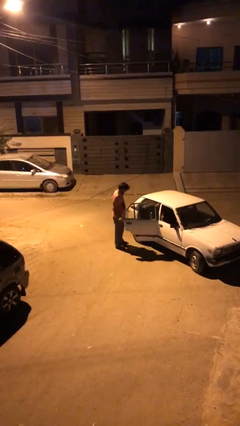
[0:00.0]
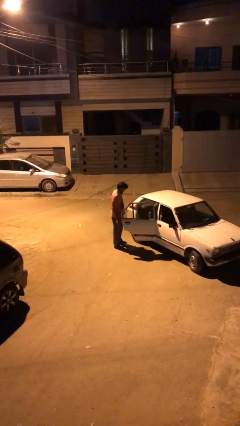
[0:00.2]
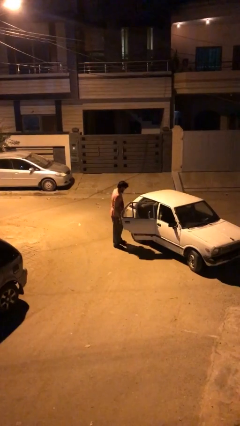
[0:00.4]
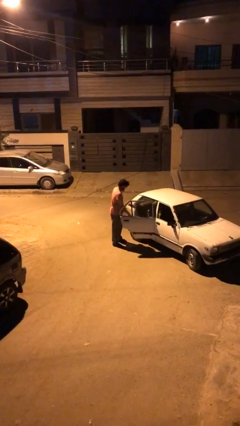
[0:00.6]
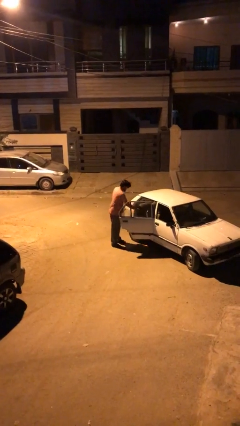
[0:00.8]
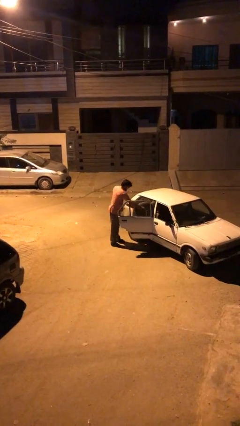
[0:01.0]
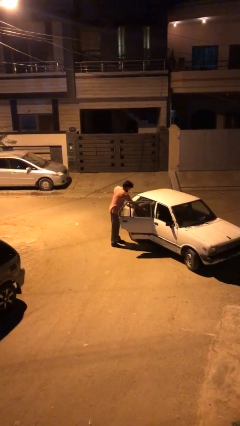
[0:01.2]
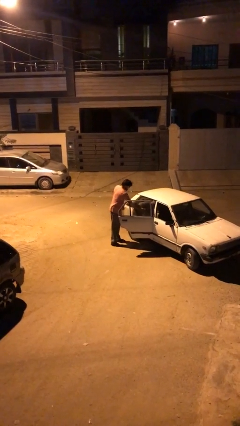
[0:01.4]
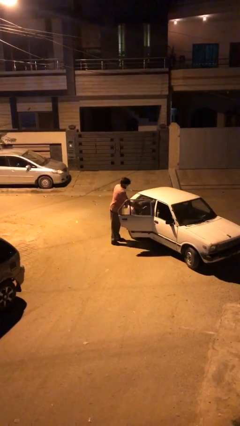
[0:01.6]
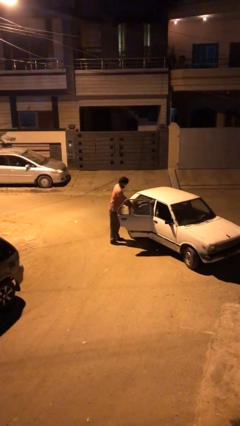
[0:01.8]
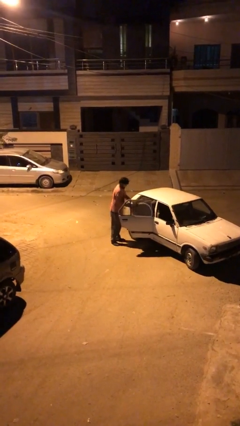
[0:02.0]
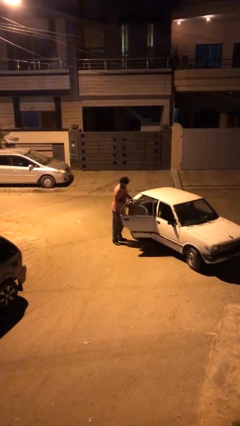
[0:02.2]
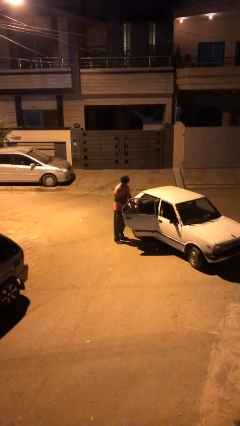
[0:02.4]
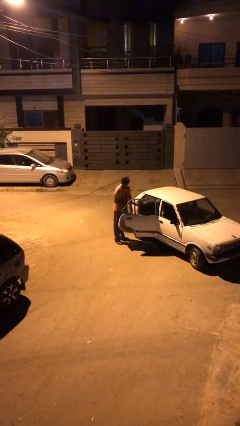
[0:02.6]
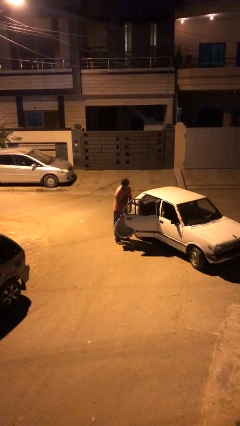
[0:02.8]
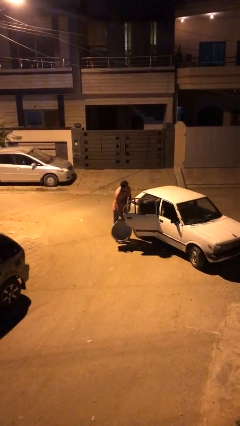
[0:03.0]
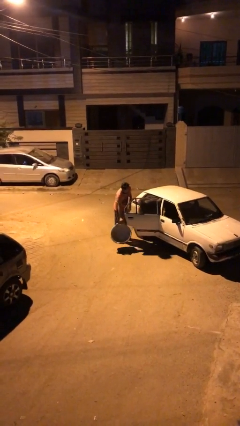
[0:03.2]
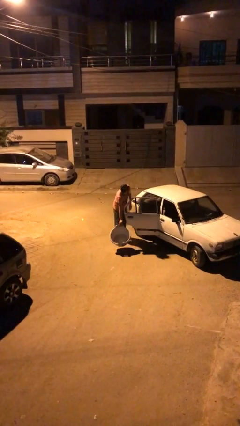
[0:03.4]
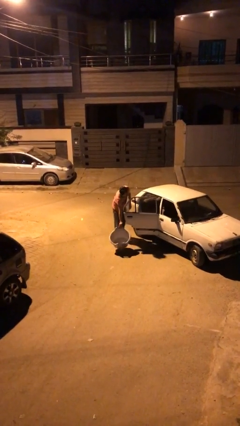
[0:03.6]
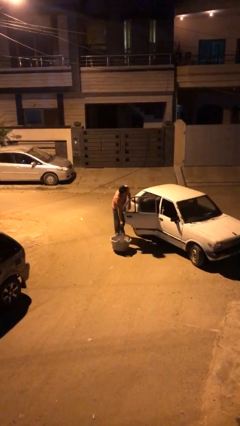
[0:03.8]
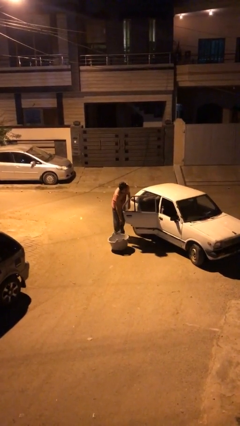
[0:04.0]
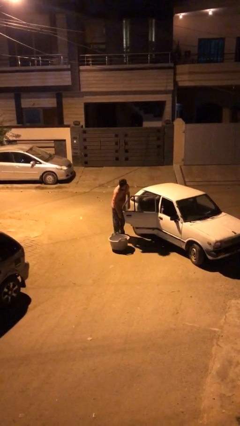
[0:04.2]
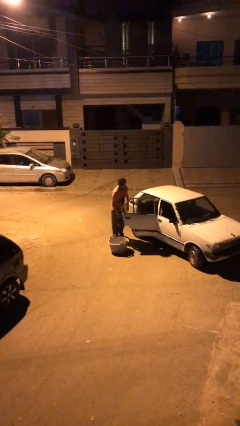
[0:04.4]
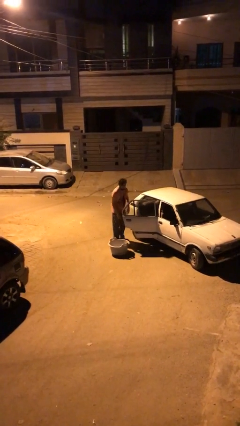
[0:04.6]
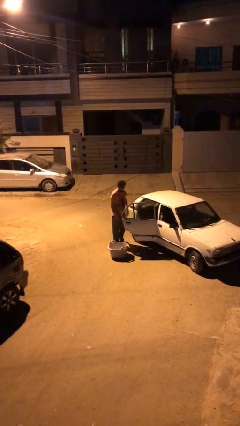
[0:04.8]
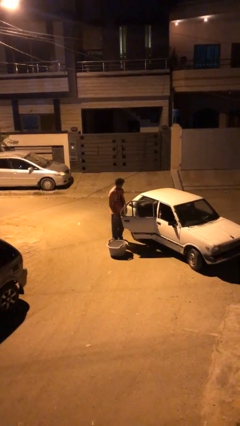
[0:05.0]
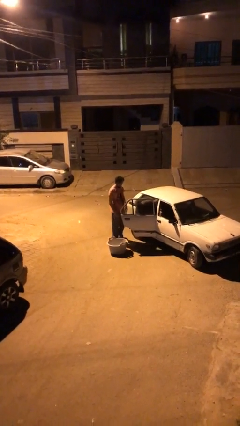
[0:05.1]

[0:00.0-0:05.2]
person unloads car

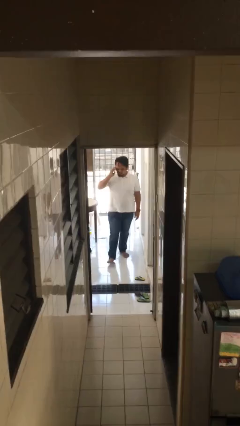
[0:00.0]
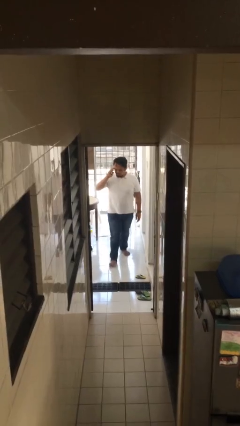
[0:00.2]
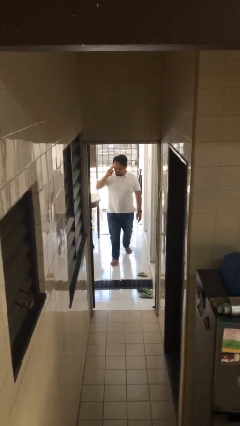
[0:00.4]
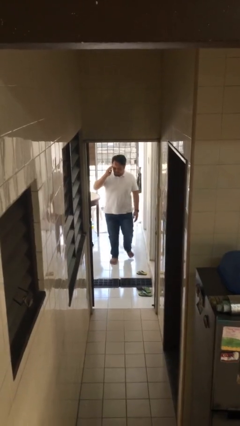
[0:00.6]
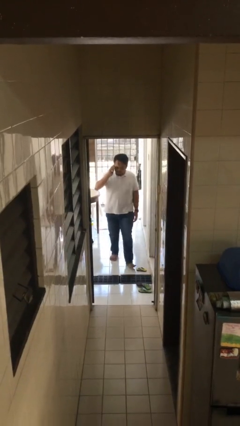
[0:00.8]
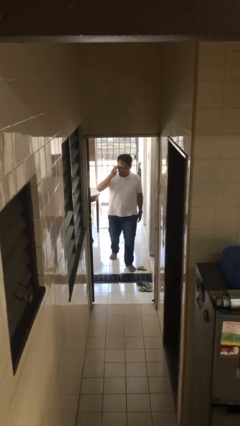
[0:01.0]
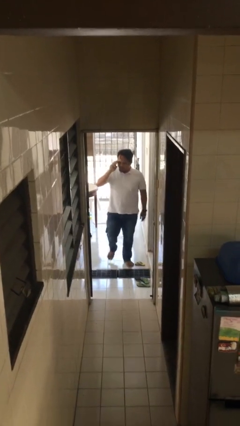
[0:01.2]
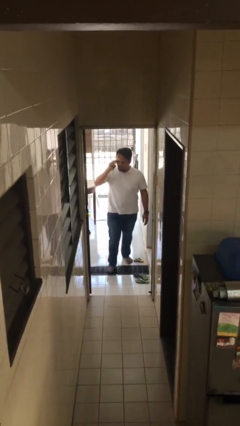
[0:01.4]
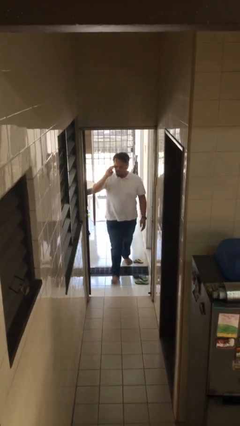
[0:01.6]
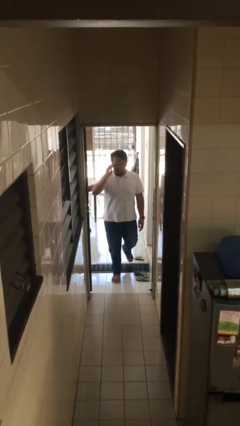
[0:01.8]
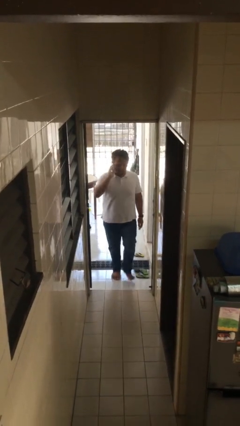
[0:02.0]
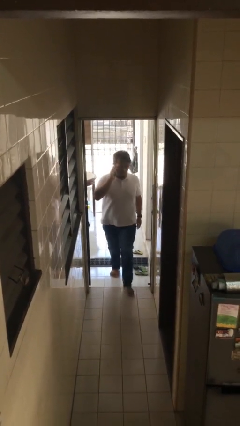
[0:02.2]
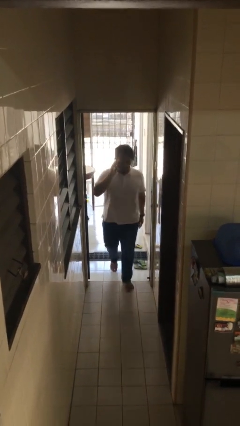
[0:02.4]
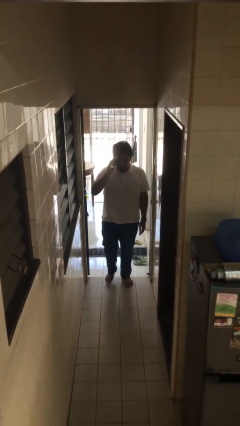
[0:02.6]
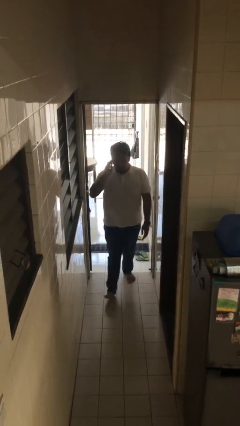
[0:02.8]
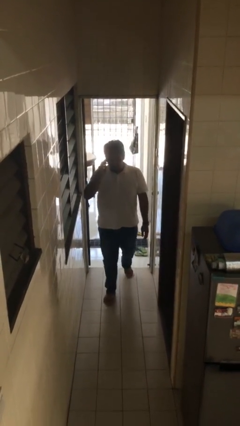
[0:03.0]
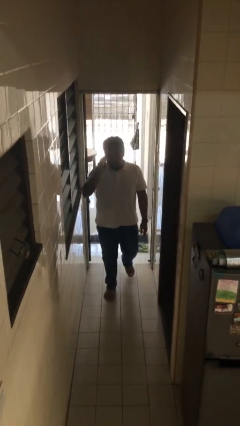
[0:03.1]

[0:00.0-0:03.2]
person enters scene through structure

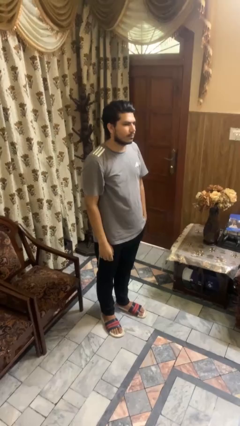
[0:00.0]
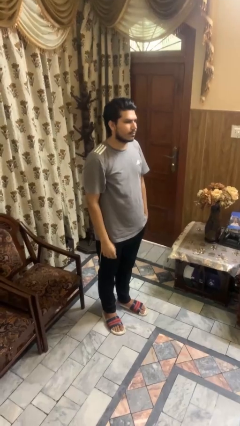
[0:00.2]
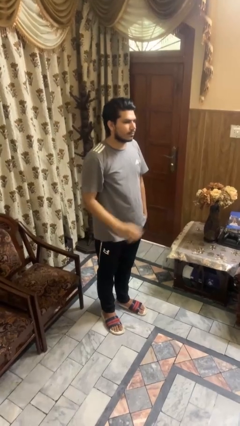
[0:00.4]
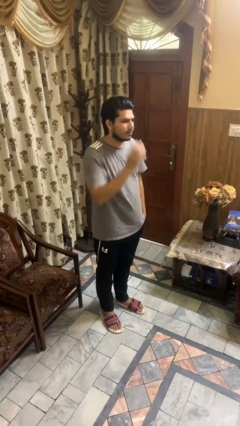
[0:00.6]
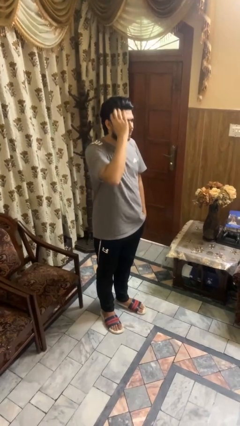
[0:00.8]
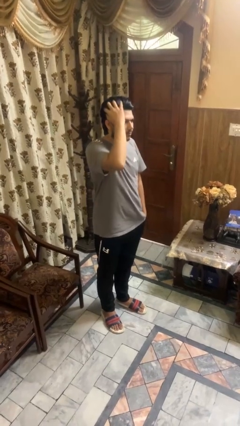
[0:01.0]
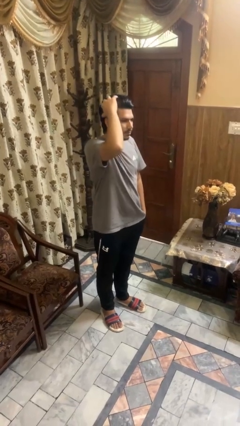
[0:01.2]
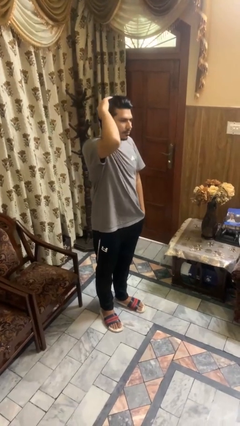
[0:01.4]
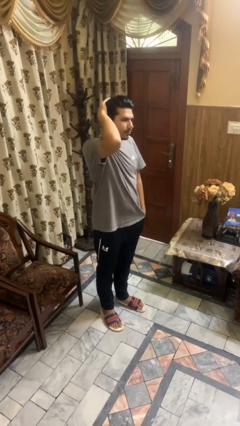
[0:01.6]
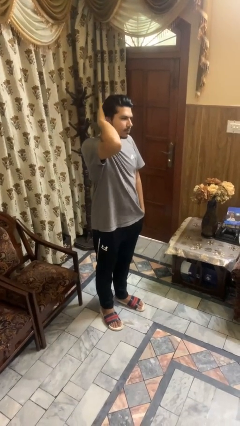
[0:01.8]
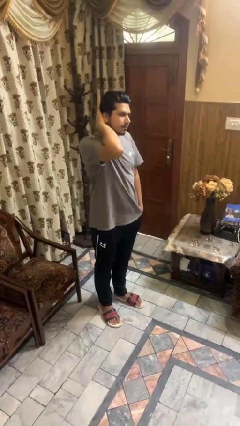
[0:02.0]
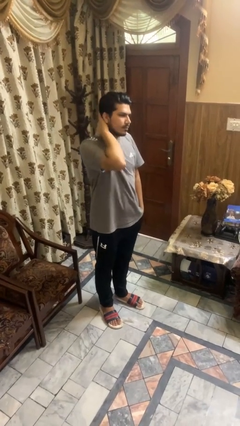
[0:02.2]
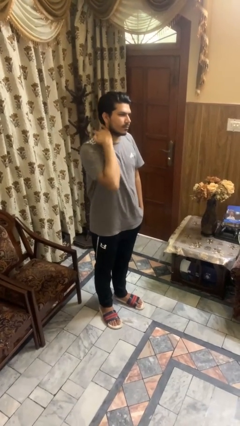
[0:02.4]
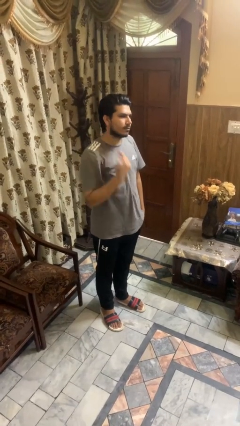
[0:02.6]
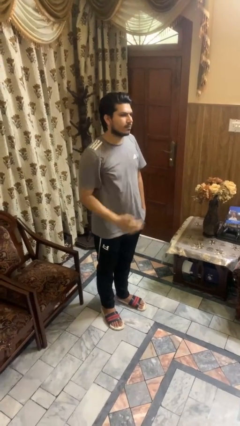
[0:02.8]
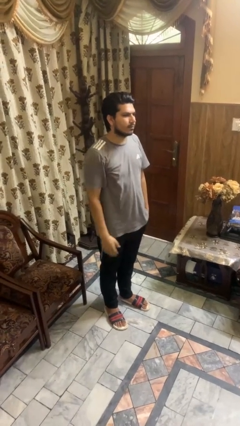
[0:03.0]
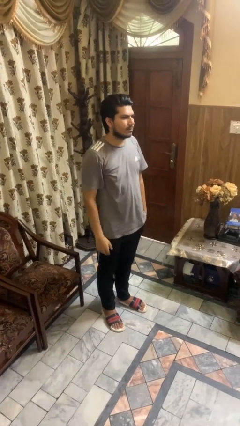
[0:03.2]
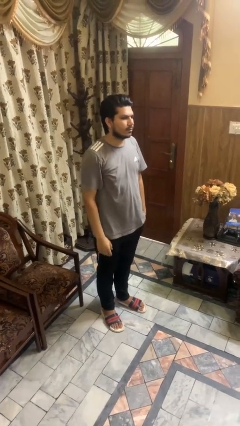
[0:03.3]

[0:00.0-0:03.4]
person strokes hair

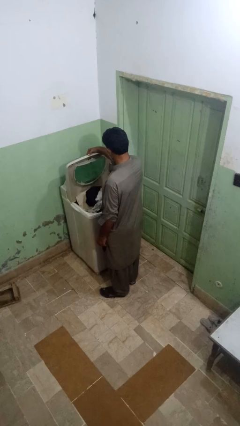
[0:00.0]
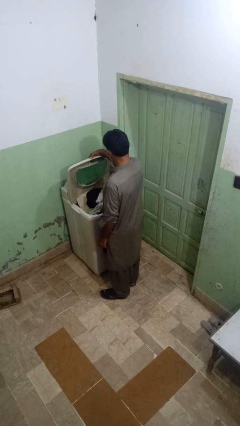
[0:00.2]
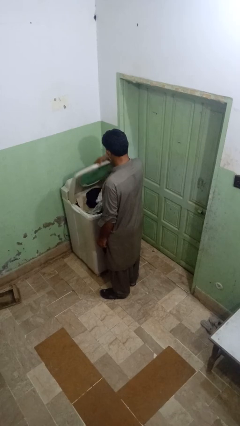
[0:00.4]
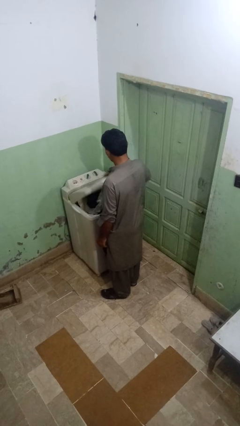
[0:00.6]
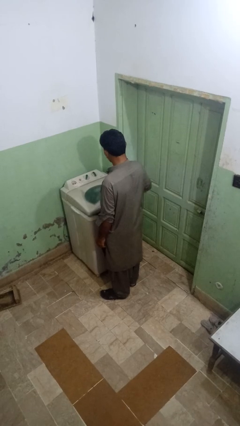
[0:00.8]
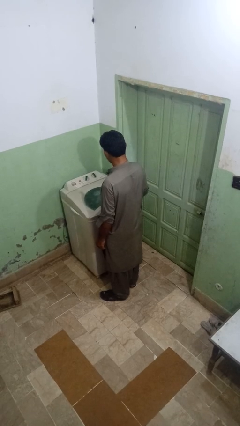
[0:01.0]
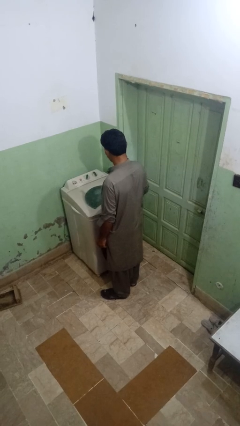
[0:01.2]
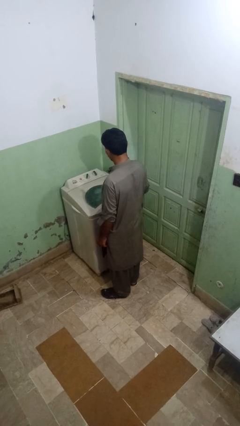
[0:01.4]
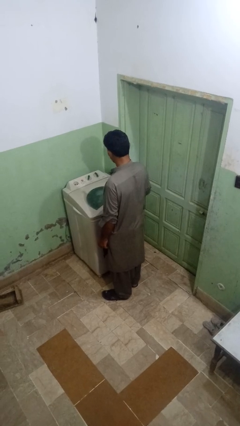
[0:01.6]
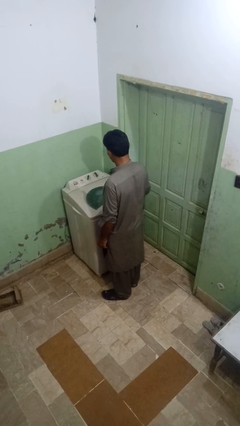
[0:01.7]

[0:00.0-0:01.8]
person closes clothes washer

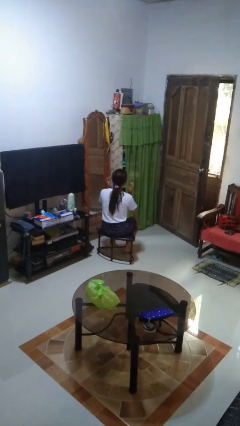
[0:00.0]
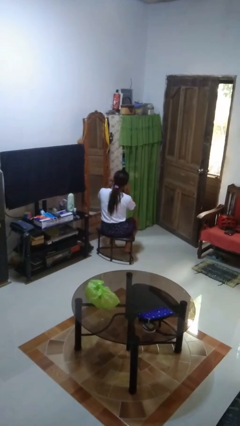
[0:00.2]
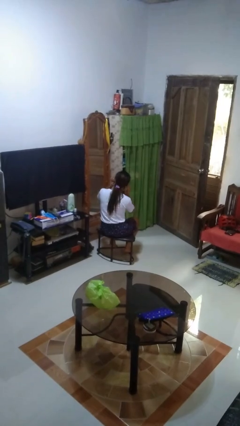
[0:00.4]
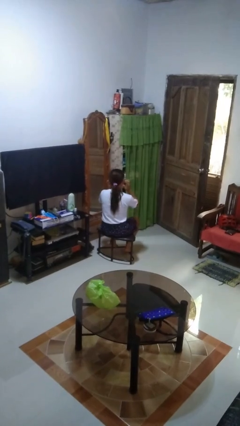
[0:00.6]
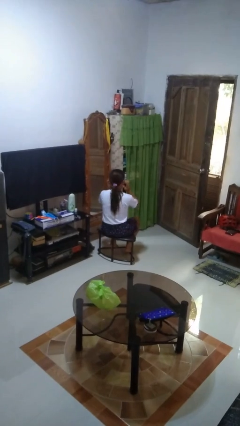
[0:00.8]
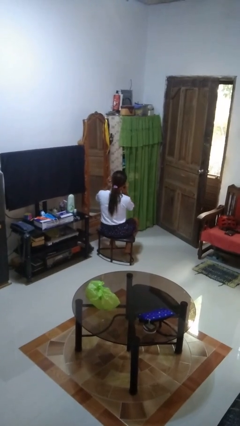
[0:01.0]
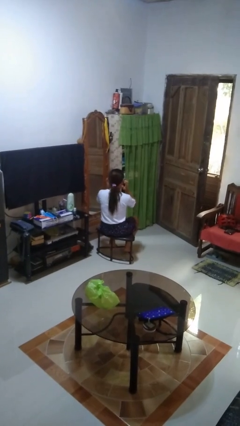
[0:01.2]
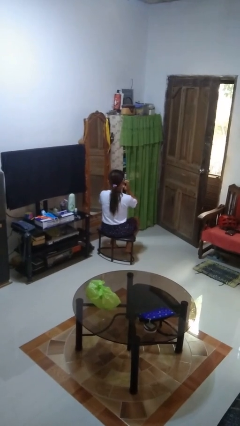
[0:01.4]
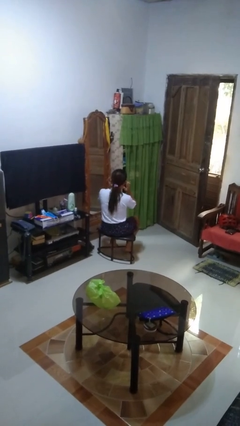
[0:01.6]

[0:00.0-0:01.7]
person puts fingers in ear

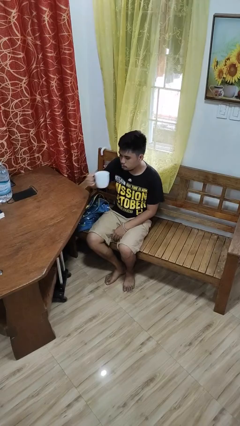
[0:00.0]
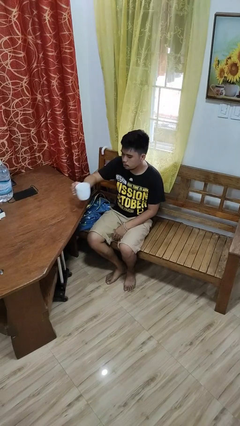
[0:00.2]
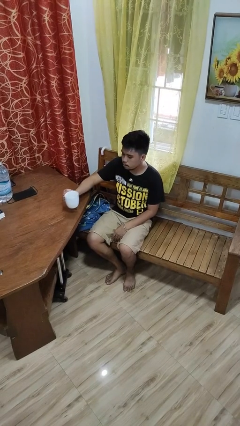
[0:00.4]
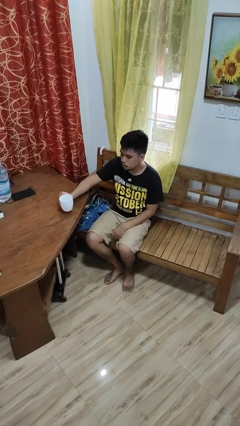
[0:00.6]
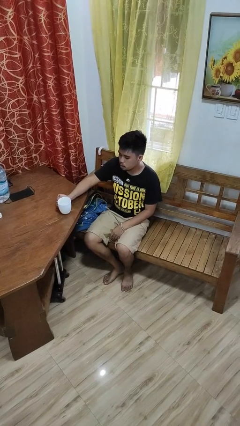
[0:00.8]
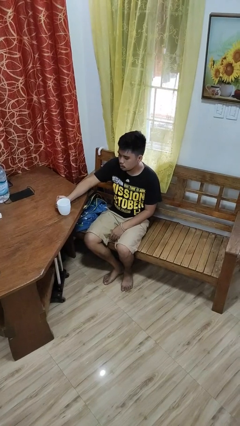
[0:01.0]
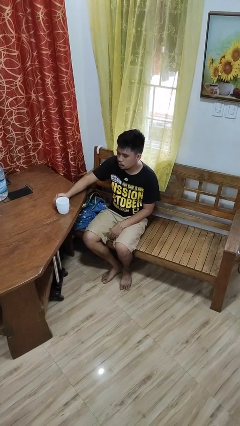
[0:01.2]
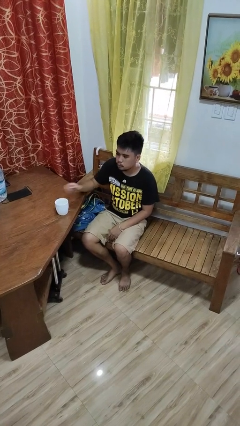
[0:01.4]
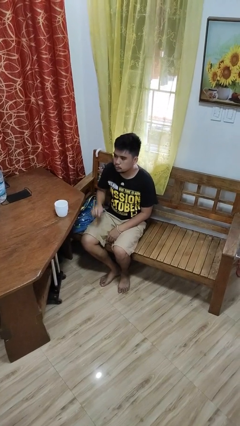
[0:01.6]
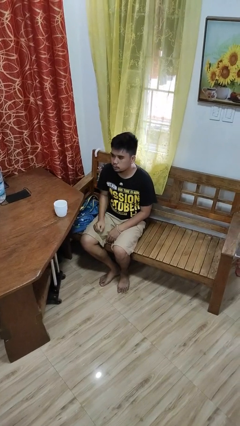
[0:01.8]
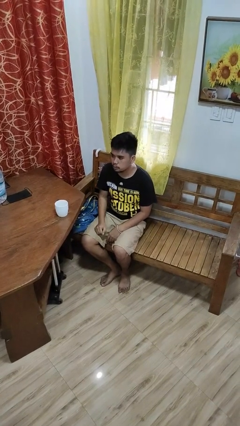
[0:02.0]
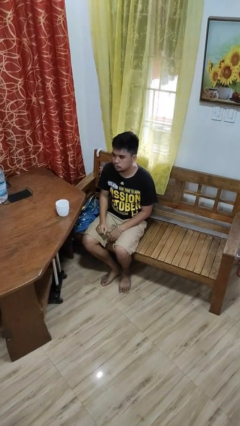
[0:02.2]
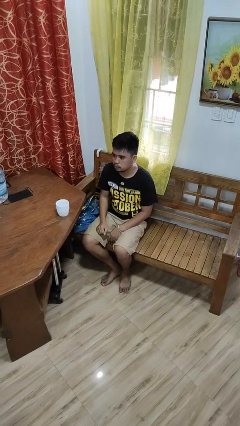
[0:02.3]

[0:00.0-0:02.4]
person puts down object on table
